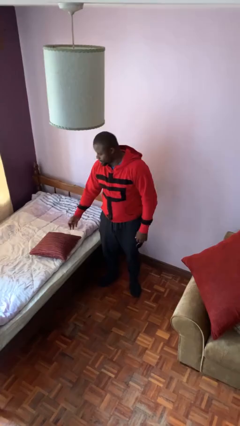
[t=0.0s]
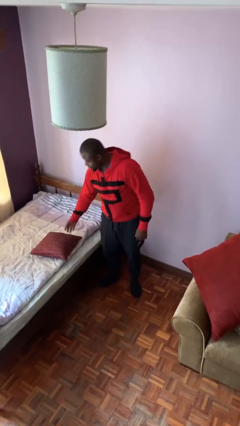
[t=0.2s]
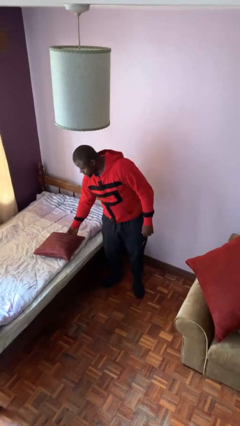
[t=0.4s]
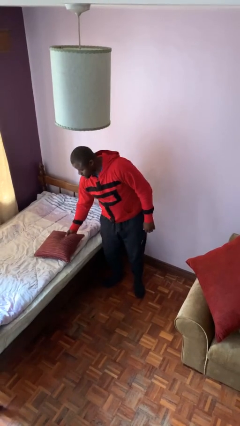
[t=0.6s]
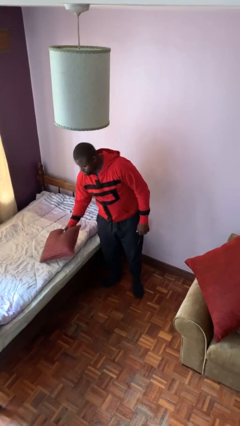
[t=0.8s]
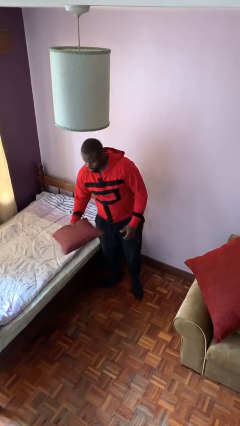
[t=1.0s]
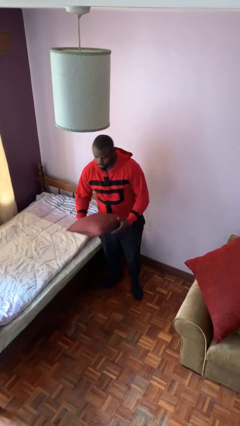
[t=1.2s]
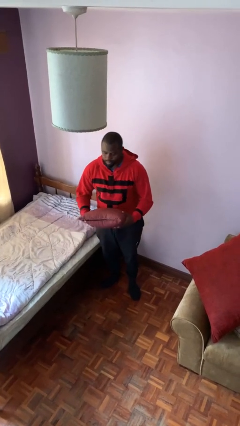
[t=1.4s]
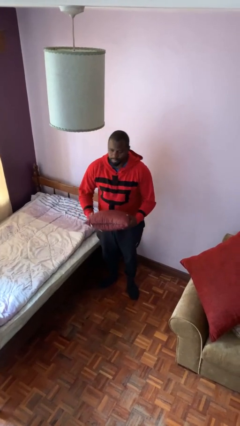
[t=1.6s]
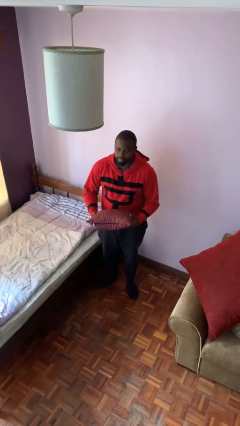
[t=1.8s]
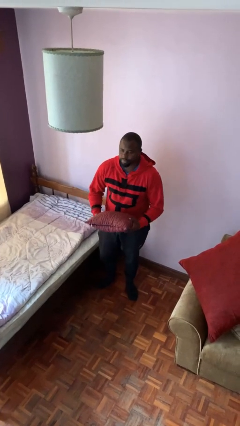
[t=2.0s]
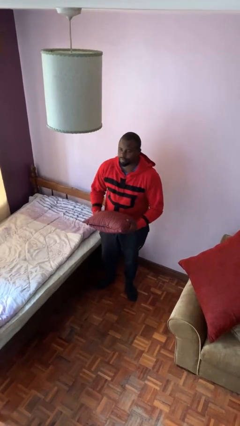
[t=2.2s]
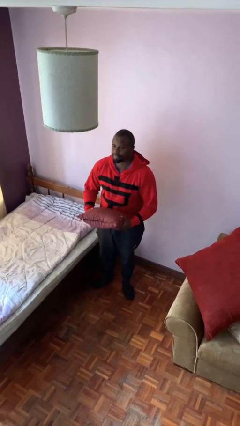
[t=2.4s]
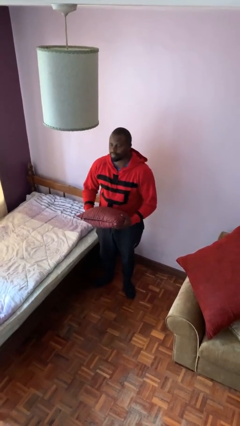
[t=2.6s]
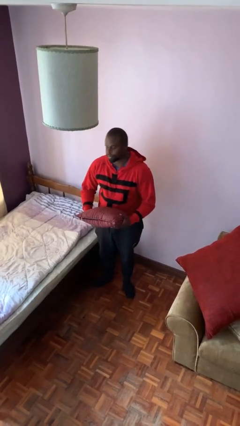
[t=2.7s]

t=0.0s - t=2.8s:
person picks up object from bed

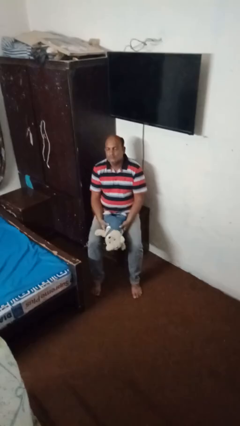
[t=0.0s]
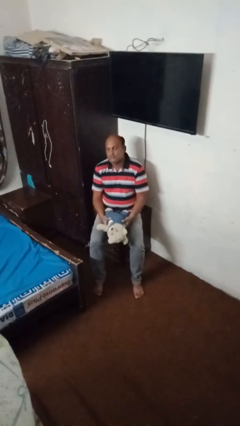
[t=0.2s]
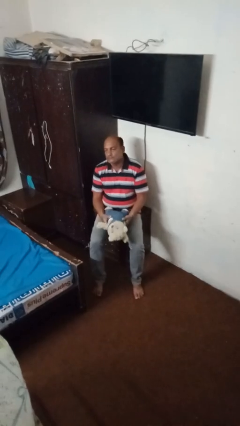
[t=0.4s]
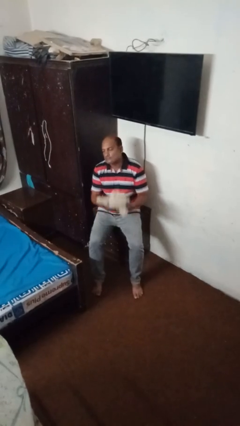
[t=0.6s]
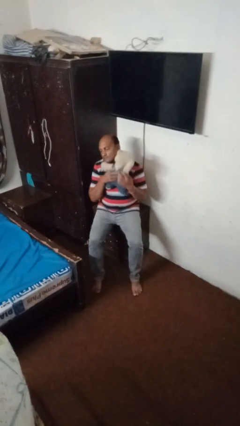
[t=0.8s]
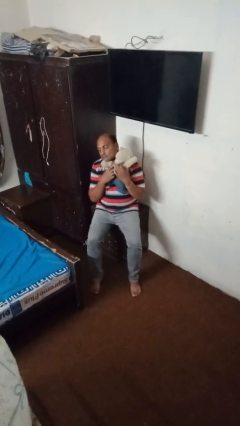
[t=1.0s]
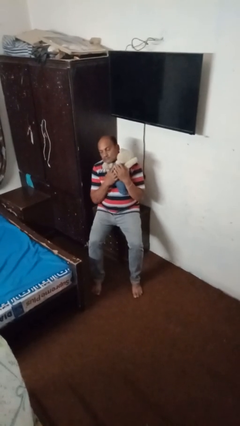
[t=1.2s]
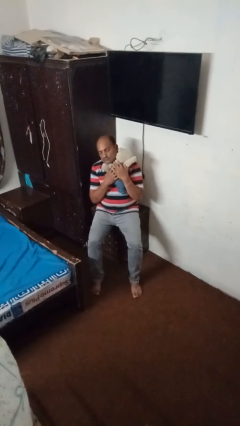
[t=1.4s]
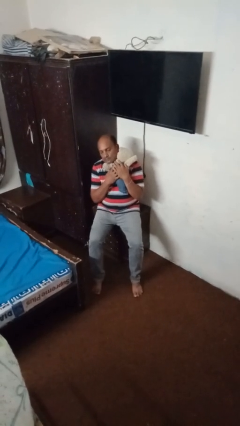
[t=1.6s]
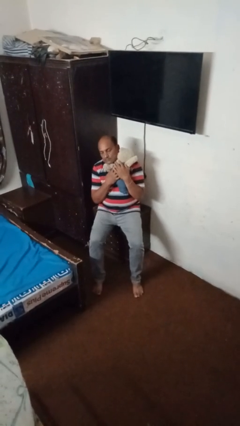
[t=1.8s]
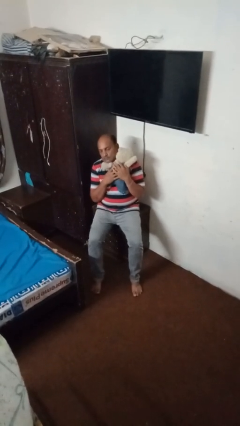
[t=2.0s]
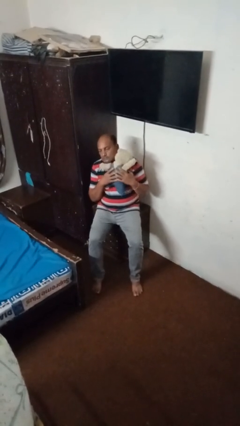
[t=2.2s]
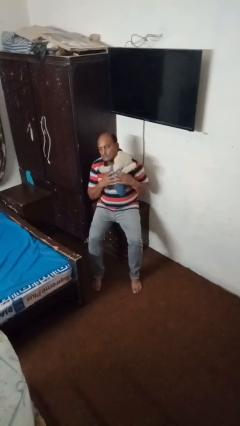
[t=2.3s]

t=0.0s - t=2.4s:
person hugs stuffed animal

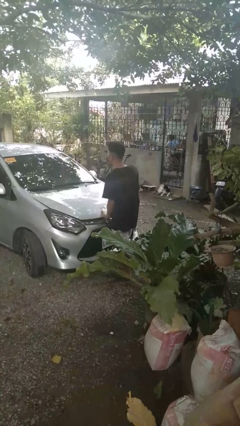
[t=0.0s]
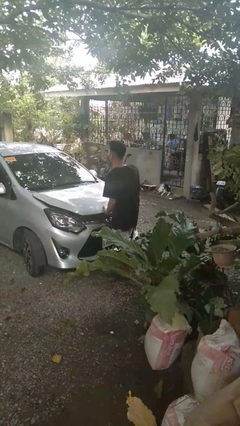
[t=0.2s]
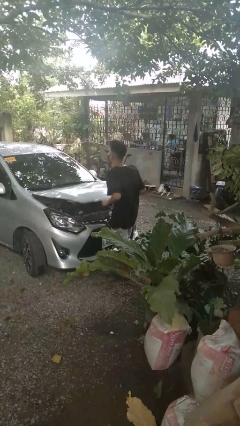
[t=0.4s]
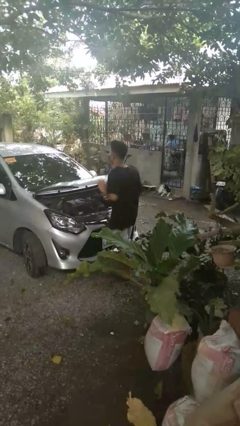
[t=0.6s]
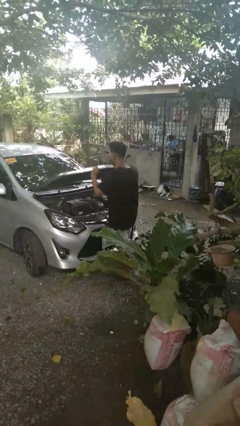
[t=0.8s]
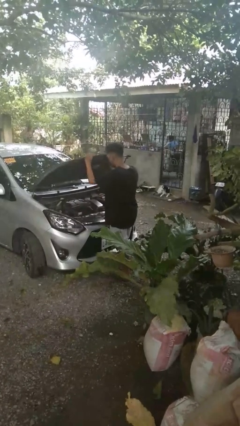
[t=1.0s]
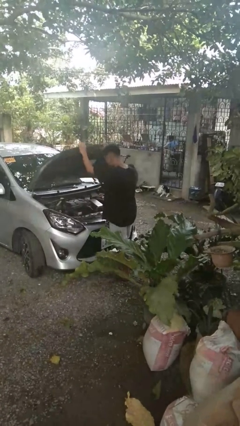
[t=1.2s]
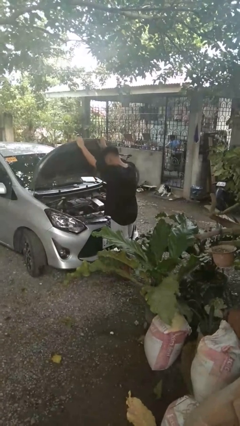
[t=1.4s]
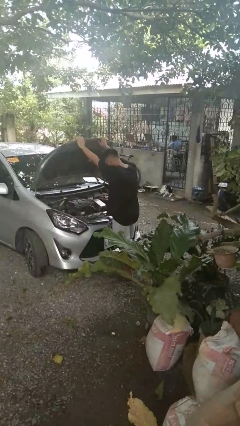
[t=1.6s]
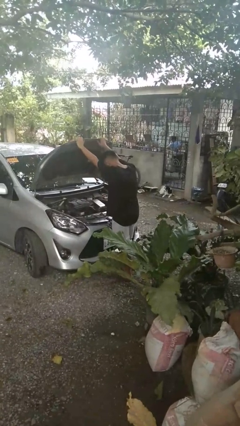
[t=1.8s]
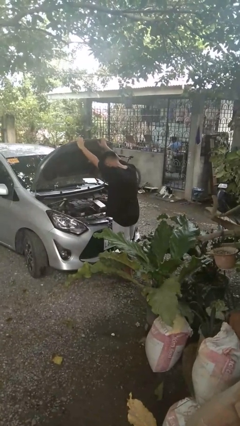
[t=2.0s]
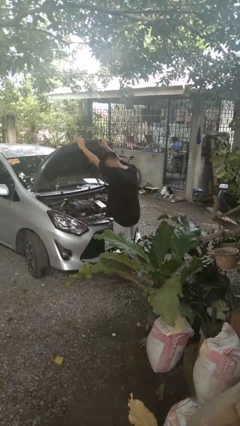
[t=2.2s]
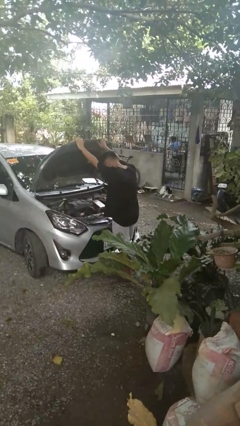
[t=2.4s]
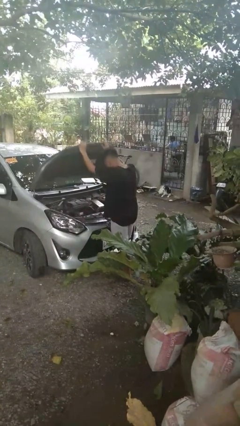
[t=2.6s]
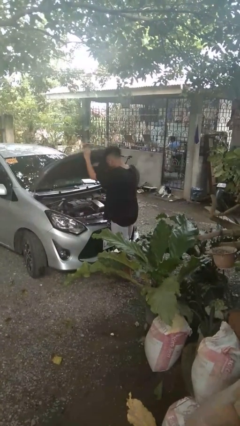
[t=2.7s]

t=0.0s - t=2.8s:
person opens car hood

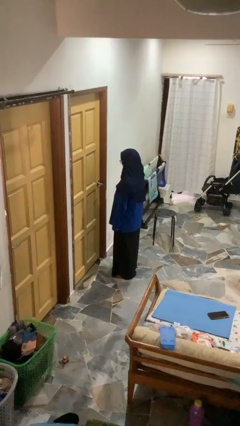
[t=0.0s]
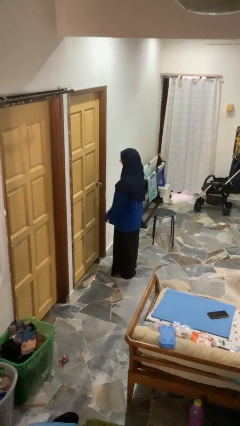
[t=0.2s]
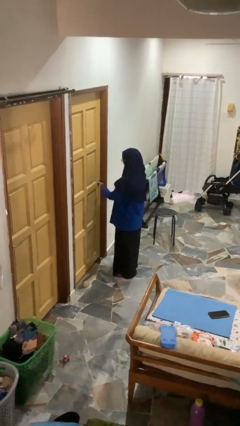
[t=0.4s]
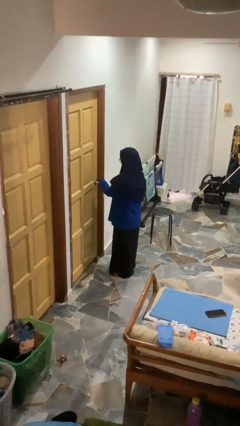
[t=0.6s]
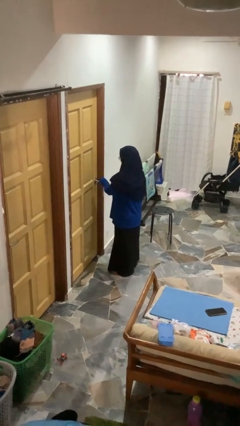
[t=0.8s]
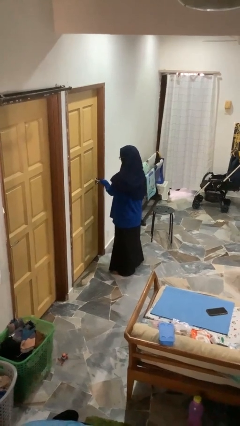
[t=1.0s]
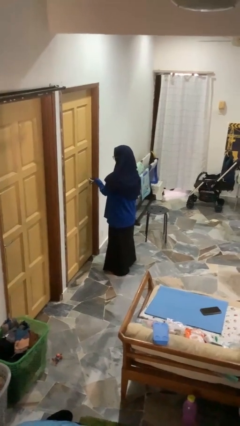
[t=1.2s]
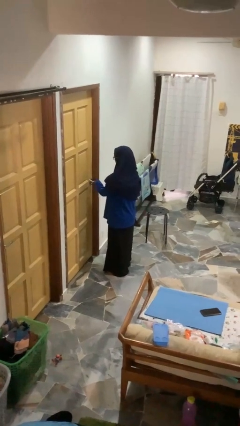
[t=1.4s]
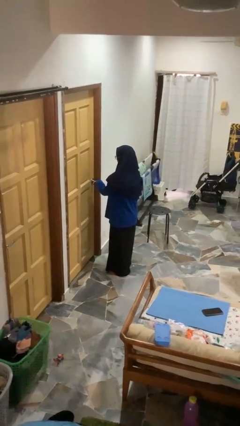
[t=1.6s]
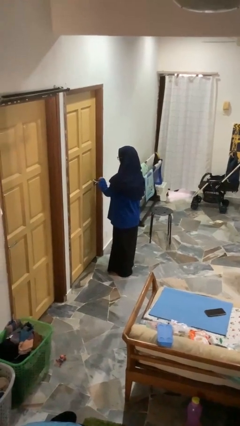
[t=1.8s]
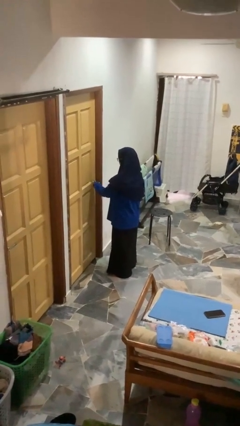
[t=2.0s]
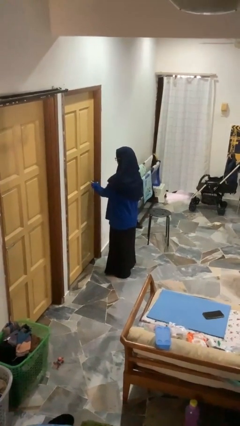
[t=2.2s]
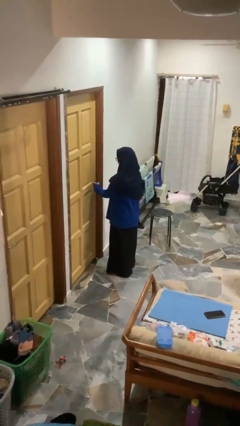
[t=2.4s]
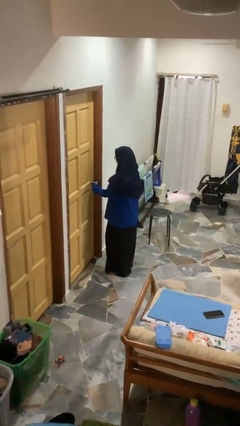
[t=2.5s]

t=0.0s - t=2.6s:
person unlocks door with keys

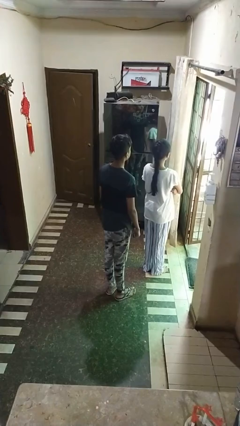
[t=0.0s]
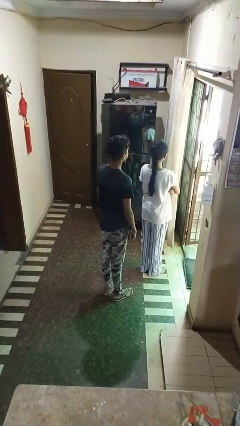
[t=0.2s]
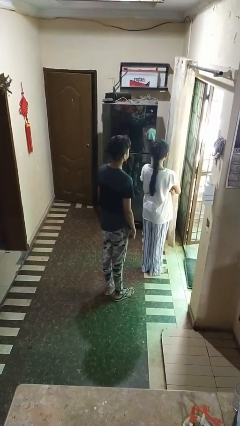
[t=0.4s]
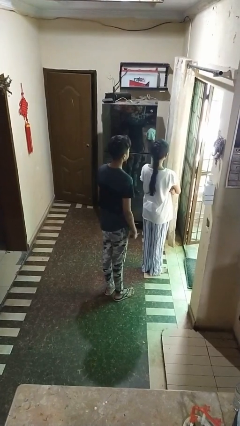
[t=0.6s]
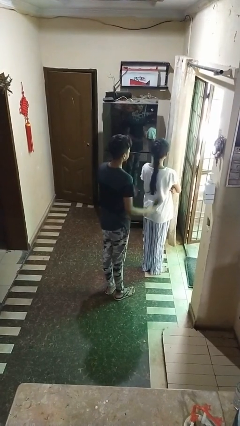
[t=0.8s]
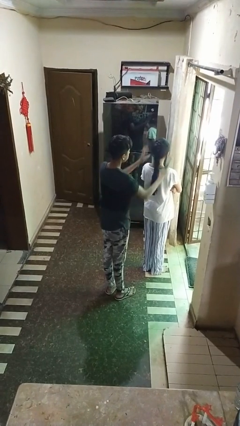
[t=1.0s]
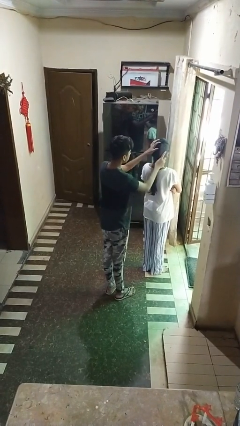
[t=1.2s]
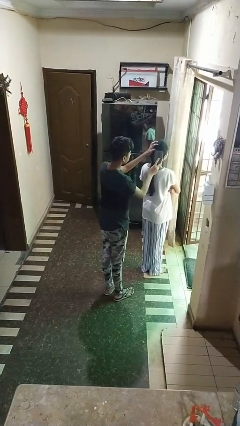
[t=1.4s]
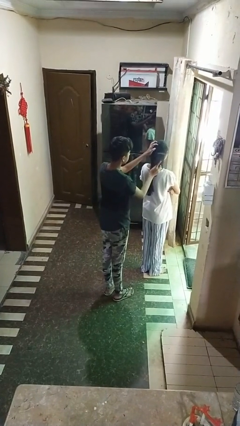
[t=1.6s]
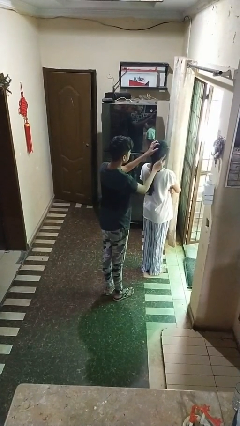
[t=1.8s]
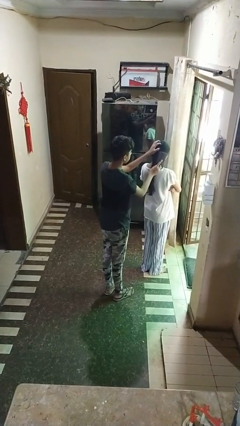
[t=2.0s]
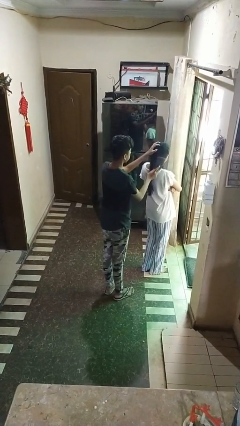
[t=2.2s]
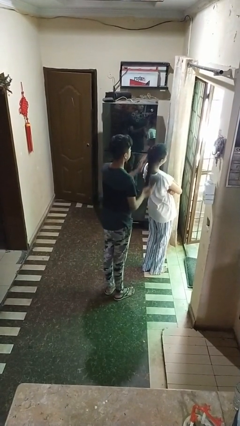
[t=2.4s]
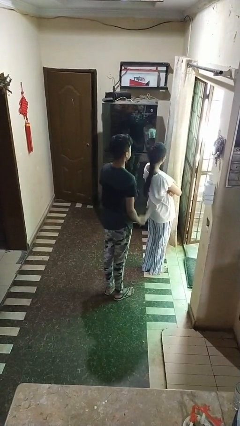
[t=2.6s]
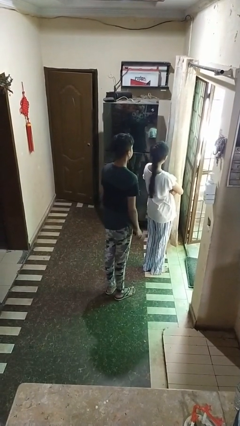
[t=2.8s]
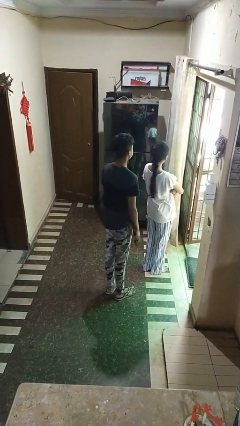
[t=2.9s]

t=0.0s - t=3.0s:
person brushes hair of person

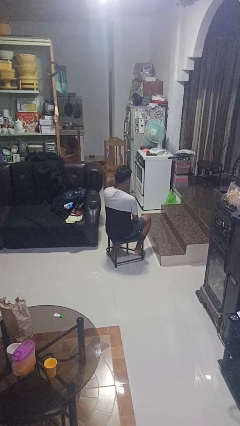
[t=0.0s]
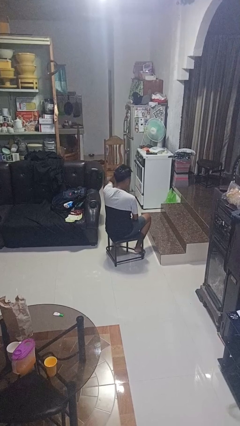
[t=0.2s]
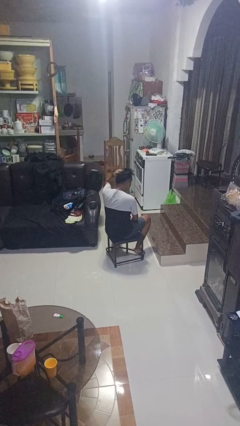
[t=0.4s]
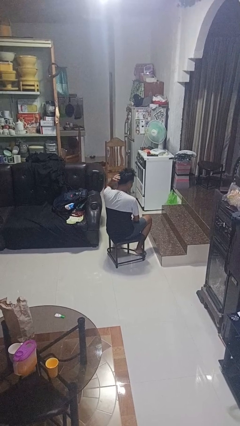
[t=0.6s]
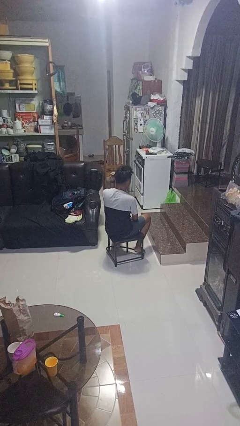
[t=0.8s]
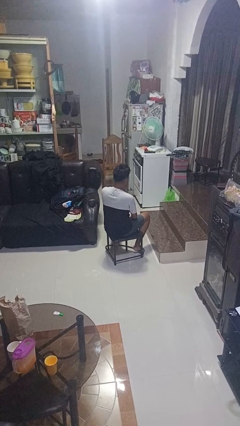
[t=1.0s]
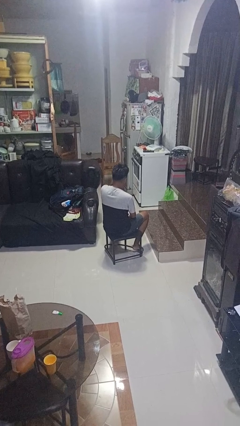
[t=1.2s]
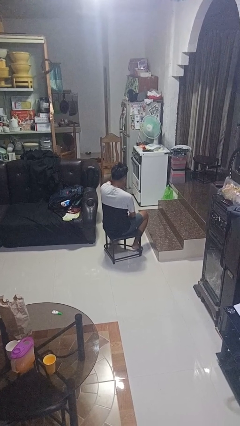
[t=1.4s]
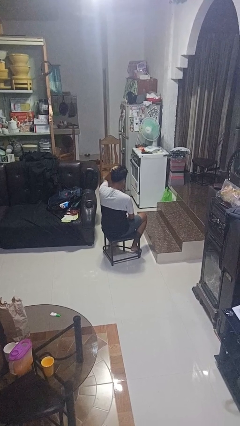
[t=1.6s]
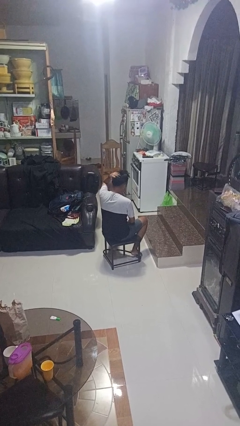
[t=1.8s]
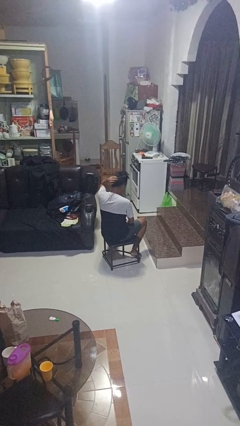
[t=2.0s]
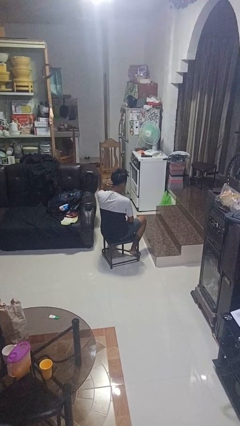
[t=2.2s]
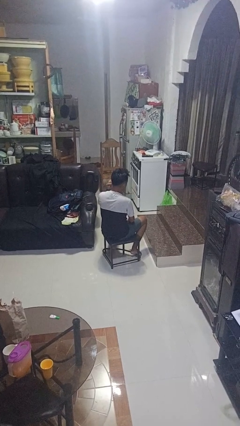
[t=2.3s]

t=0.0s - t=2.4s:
person strokes hair

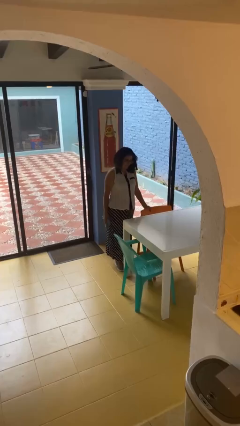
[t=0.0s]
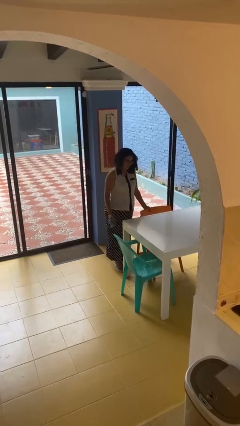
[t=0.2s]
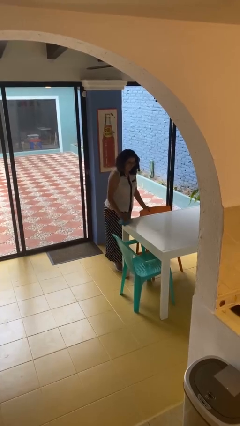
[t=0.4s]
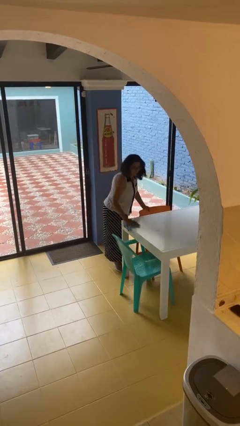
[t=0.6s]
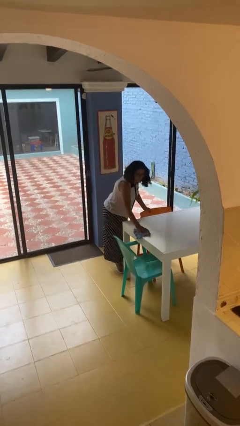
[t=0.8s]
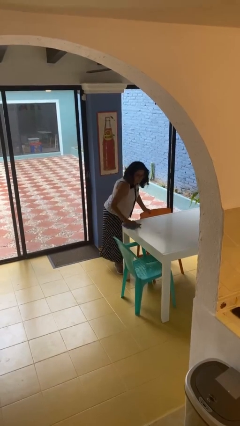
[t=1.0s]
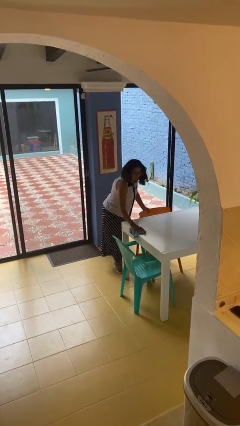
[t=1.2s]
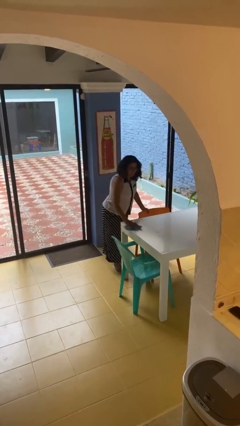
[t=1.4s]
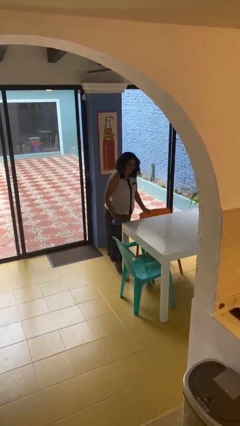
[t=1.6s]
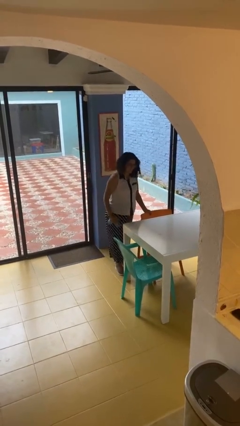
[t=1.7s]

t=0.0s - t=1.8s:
person cleans table with rag
